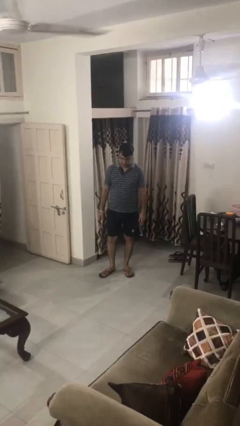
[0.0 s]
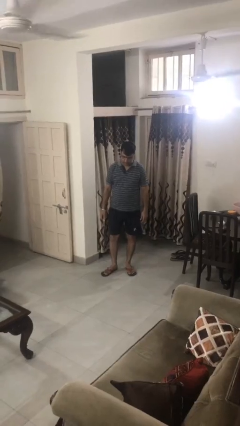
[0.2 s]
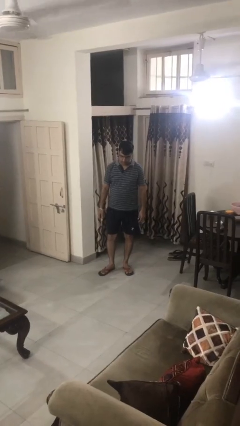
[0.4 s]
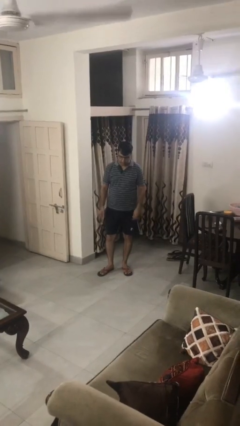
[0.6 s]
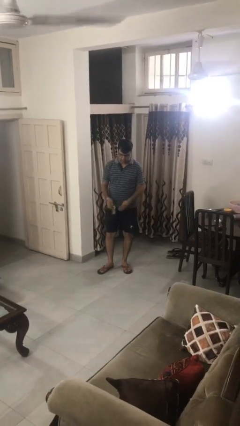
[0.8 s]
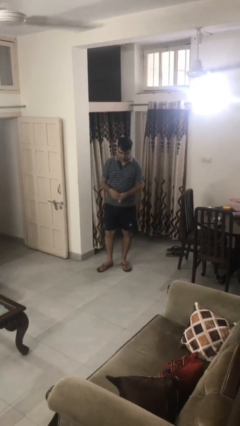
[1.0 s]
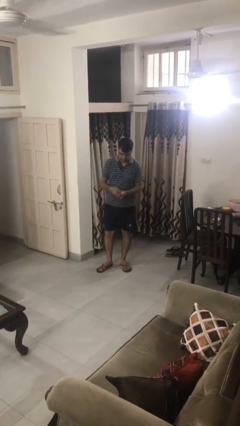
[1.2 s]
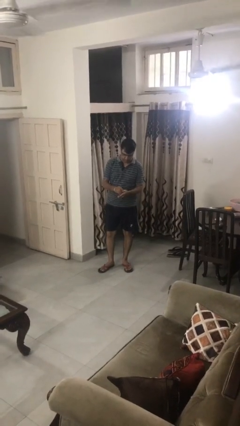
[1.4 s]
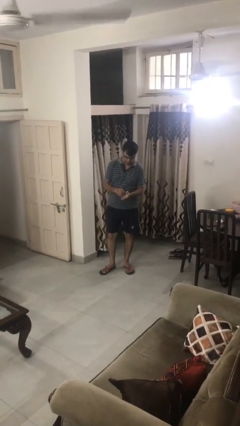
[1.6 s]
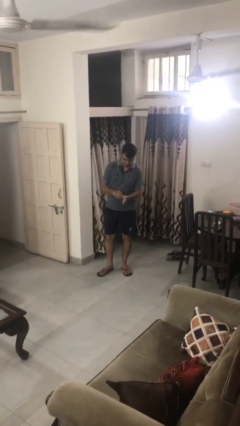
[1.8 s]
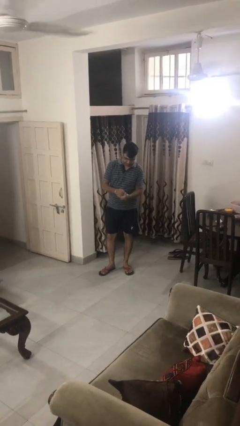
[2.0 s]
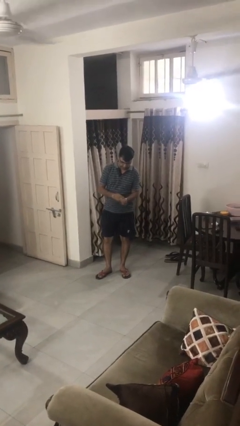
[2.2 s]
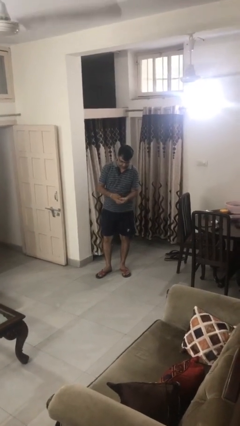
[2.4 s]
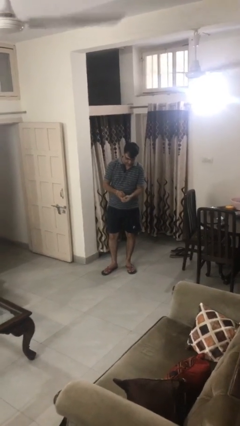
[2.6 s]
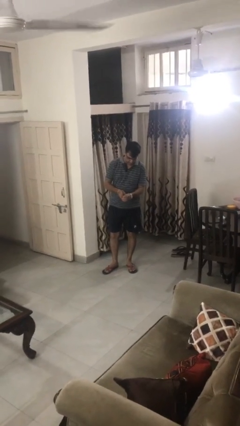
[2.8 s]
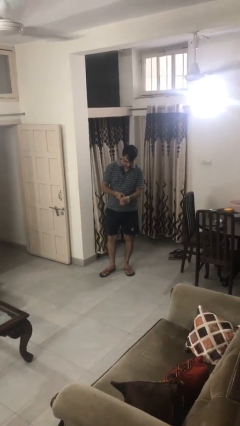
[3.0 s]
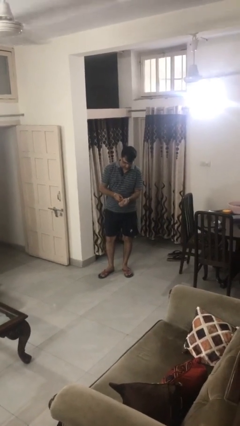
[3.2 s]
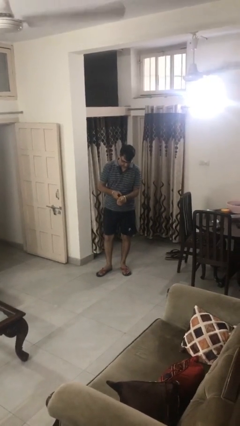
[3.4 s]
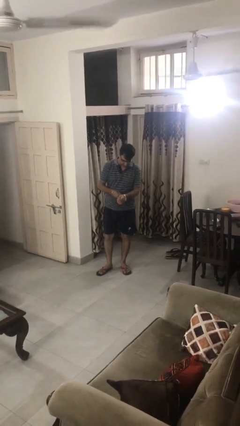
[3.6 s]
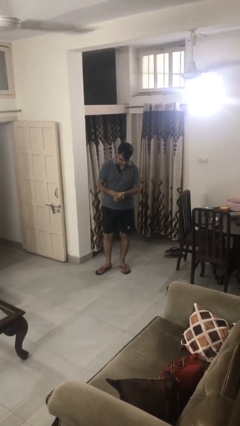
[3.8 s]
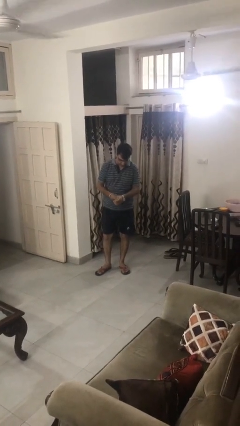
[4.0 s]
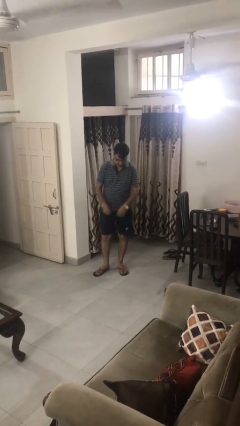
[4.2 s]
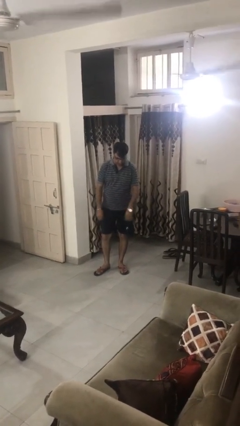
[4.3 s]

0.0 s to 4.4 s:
person puts on wristwatch

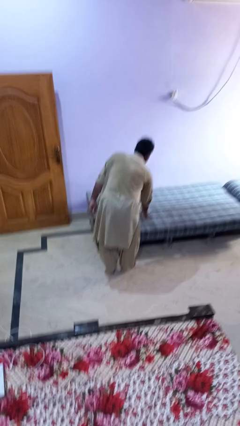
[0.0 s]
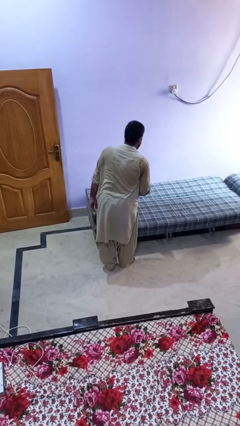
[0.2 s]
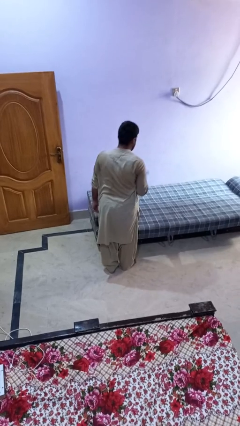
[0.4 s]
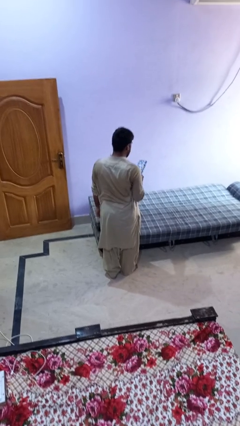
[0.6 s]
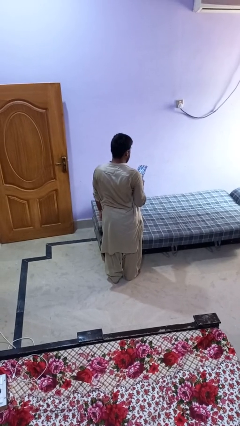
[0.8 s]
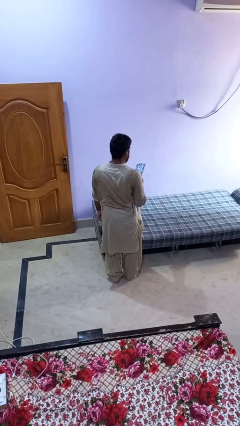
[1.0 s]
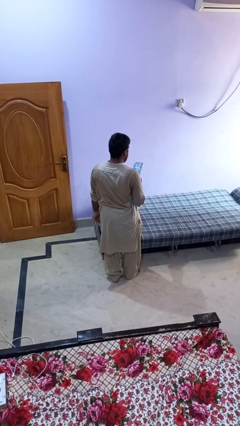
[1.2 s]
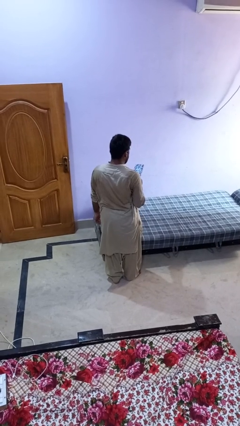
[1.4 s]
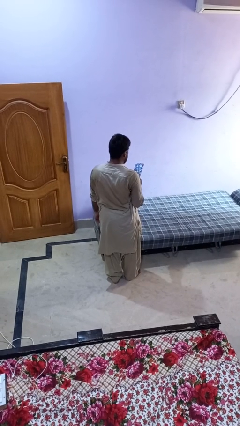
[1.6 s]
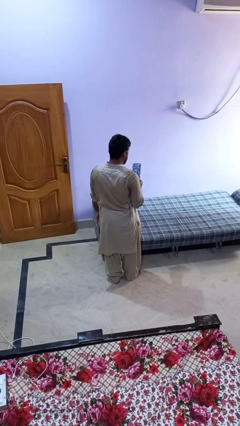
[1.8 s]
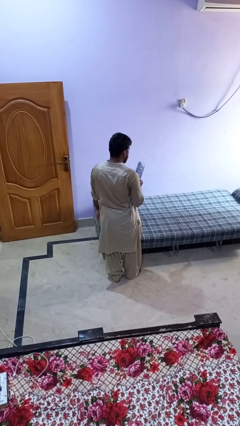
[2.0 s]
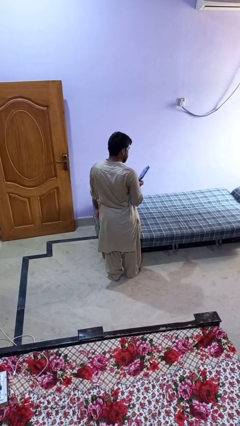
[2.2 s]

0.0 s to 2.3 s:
person picks up object from bed

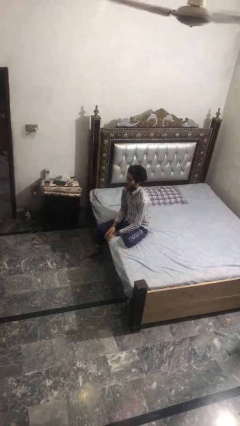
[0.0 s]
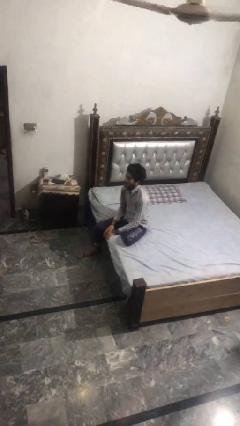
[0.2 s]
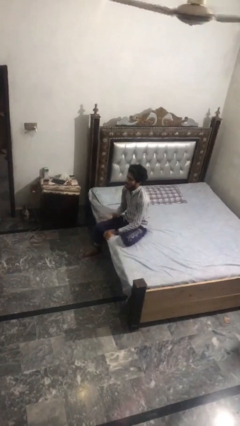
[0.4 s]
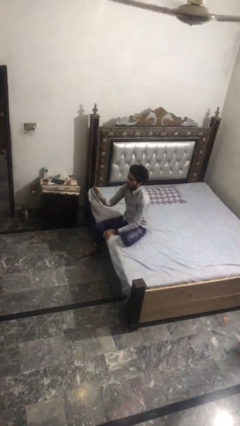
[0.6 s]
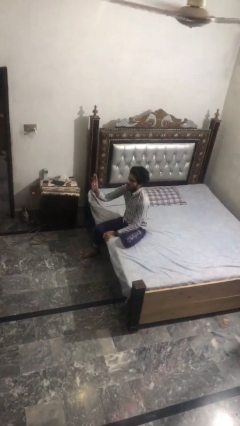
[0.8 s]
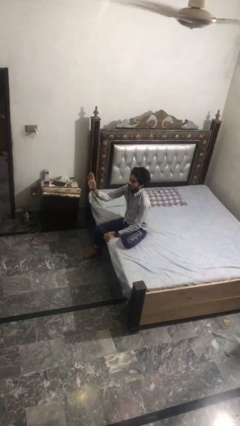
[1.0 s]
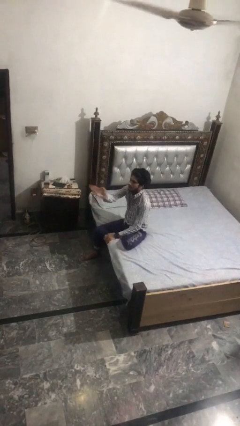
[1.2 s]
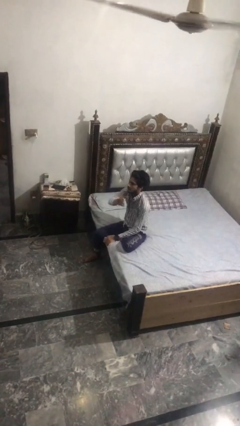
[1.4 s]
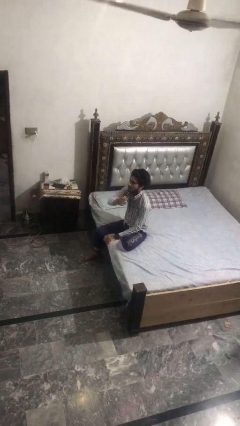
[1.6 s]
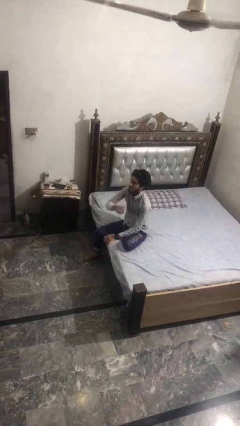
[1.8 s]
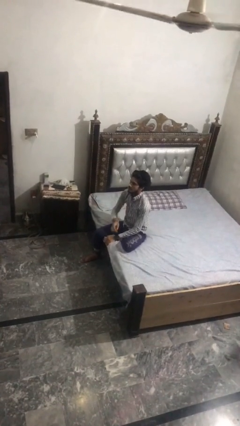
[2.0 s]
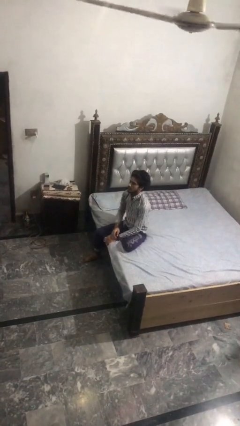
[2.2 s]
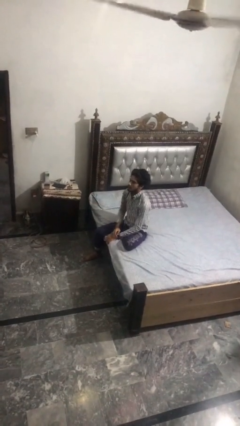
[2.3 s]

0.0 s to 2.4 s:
person gestures swipe left

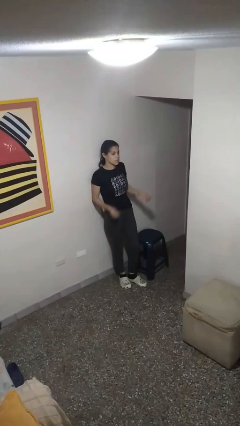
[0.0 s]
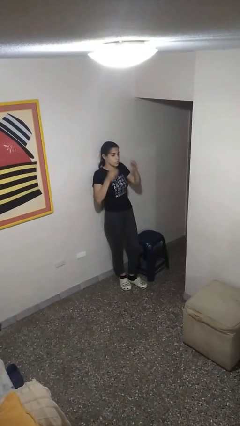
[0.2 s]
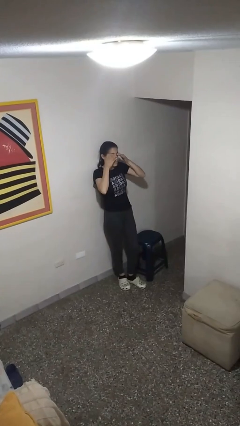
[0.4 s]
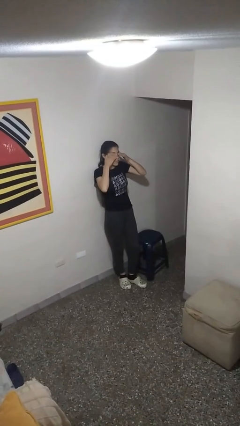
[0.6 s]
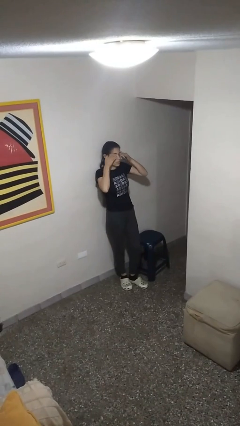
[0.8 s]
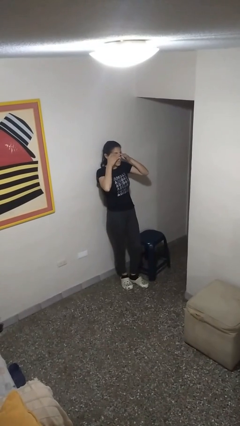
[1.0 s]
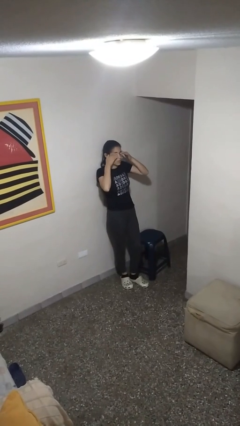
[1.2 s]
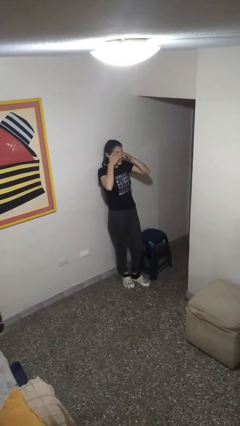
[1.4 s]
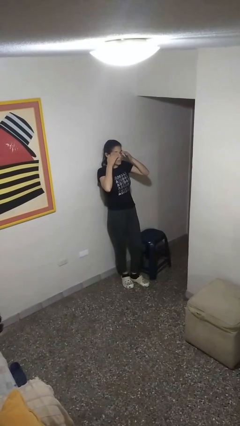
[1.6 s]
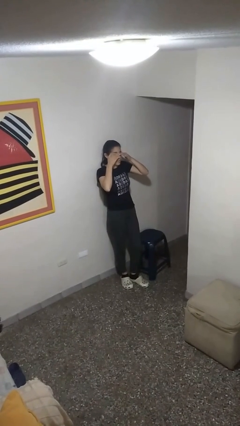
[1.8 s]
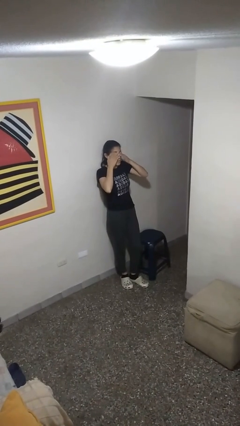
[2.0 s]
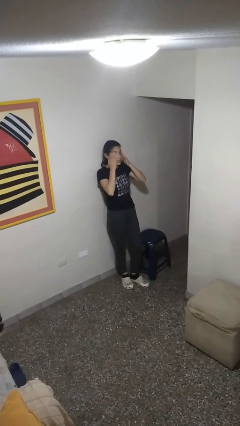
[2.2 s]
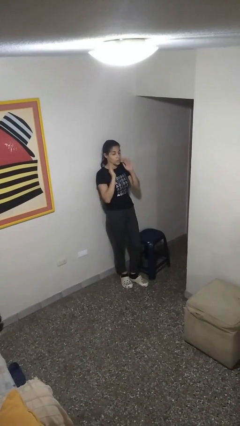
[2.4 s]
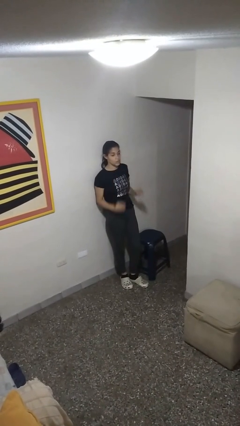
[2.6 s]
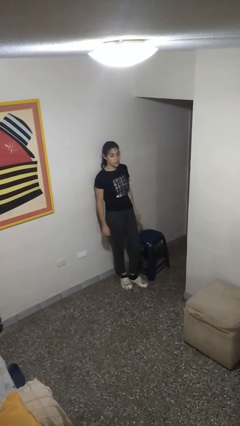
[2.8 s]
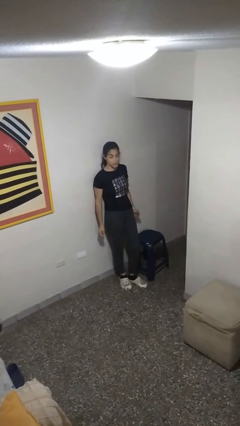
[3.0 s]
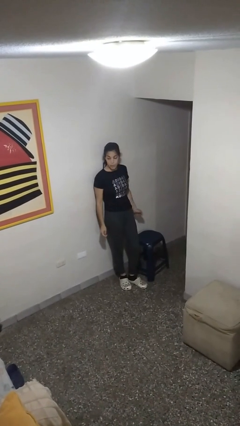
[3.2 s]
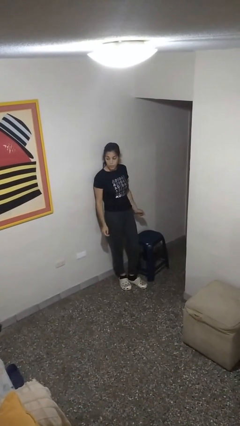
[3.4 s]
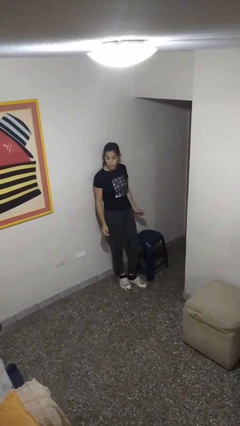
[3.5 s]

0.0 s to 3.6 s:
person rubs eyes

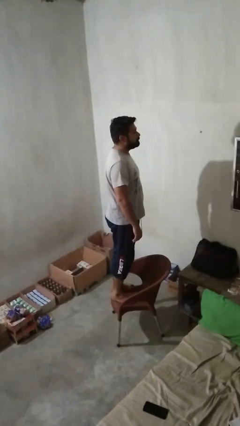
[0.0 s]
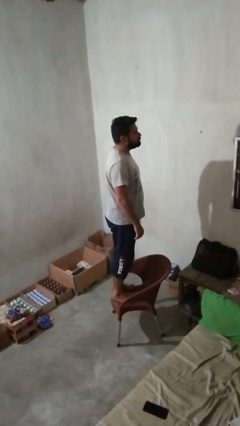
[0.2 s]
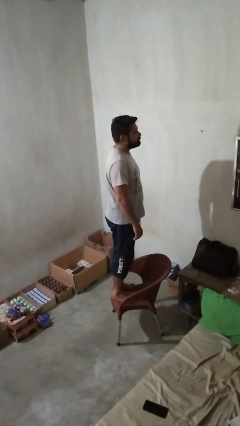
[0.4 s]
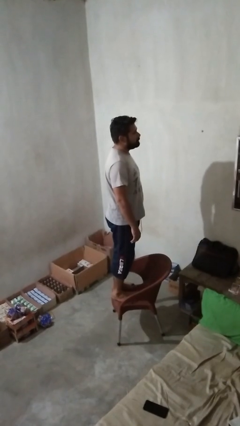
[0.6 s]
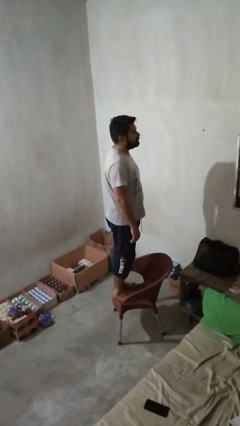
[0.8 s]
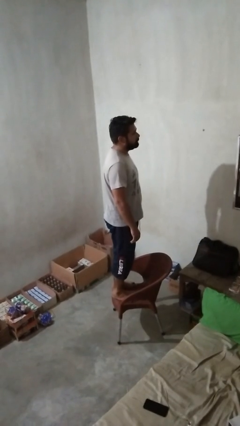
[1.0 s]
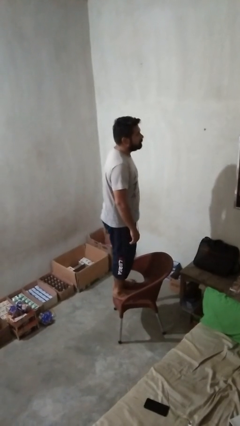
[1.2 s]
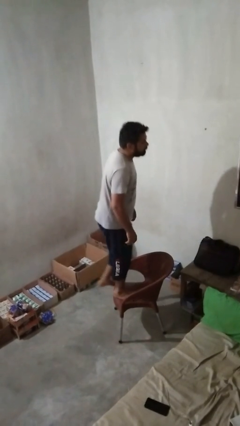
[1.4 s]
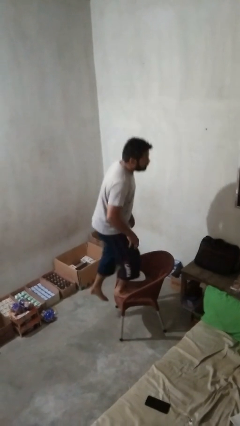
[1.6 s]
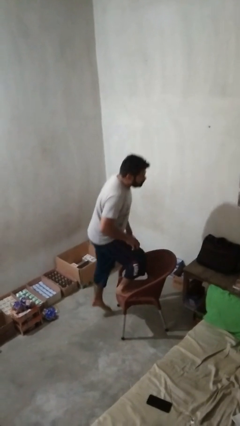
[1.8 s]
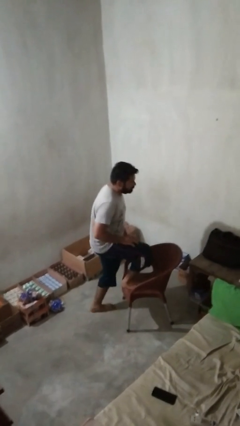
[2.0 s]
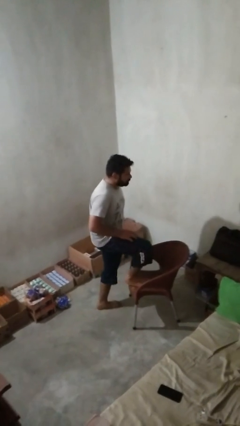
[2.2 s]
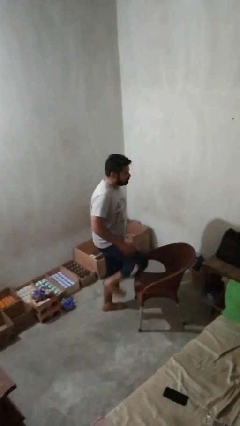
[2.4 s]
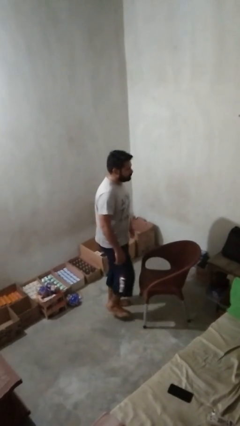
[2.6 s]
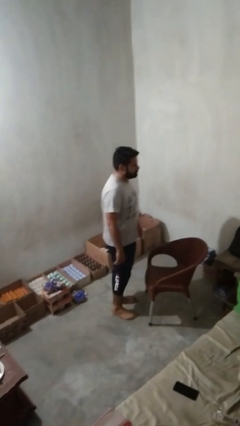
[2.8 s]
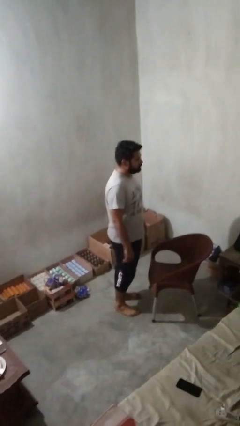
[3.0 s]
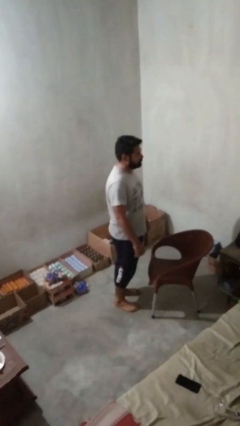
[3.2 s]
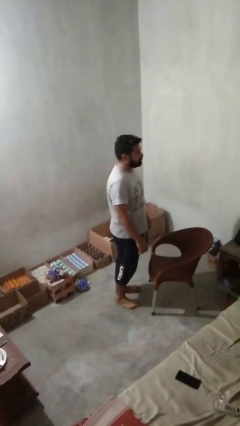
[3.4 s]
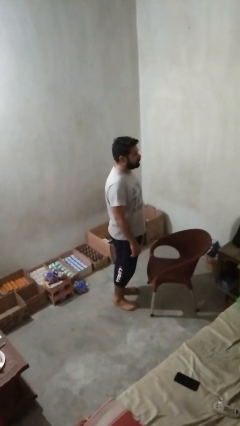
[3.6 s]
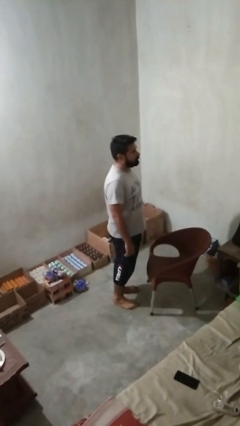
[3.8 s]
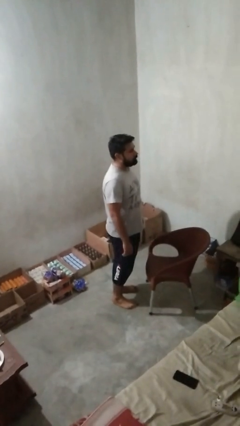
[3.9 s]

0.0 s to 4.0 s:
person climbs off chair

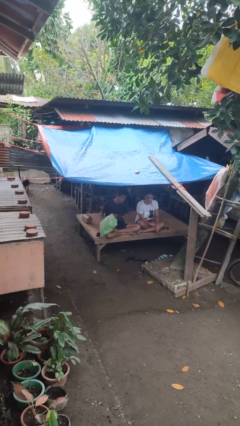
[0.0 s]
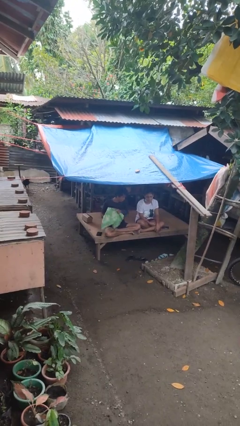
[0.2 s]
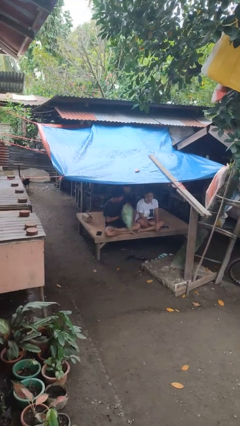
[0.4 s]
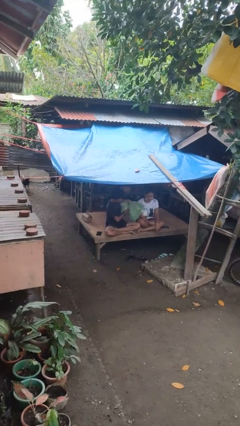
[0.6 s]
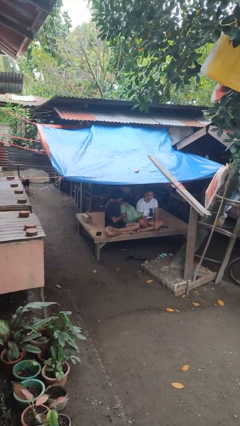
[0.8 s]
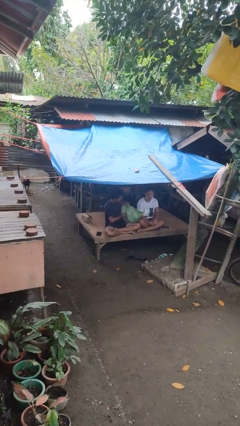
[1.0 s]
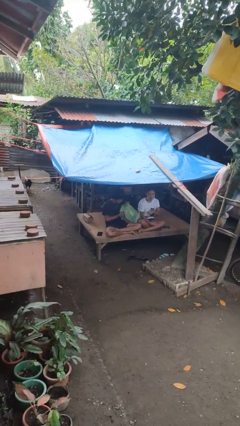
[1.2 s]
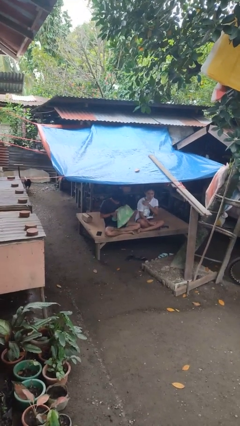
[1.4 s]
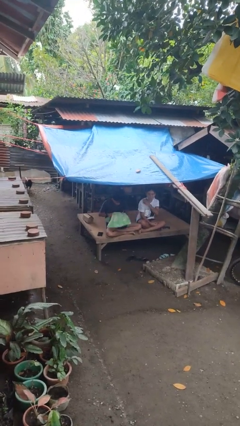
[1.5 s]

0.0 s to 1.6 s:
person hits person with pillow
